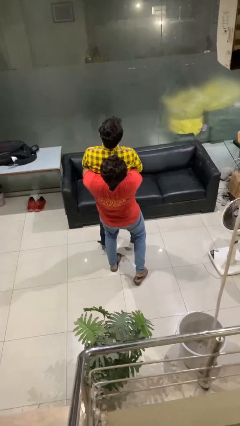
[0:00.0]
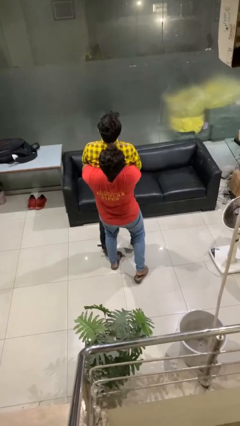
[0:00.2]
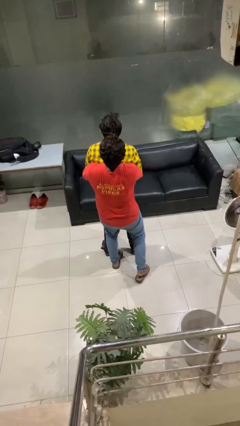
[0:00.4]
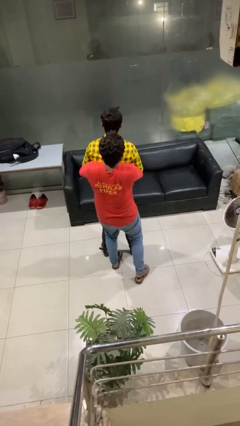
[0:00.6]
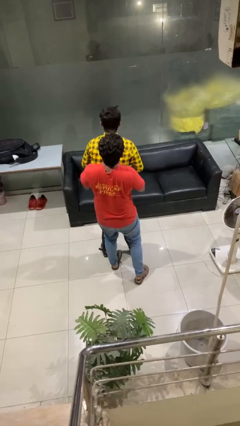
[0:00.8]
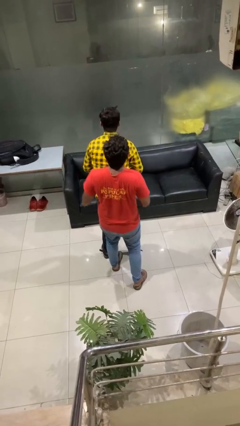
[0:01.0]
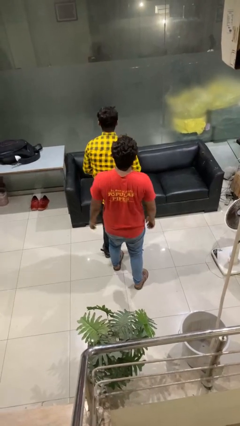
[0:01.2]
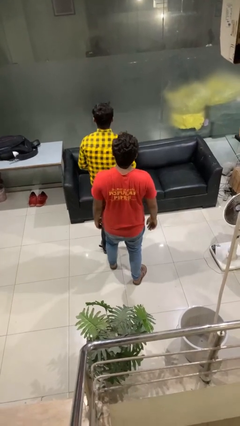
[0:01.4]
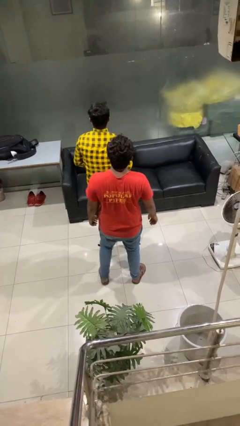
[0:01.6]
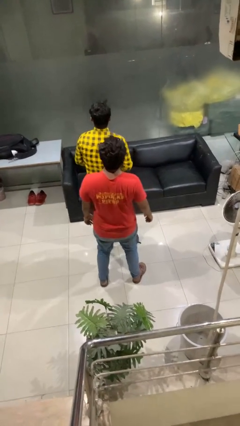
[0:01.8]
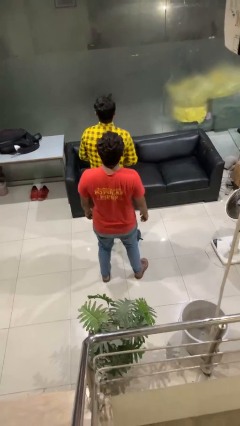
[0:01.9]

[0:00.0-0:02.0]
person puts down person

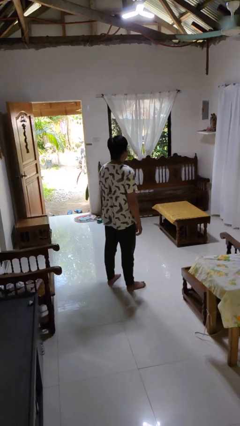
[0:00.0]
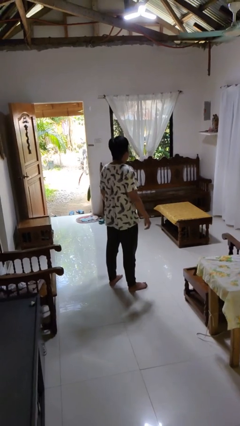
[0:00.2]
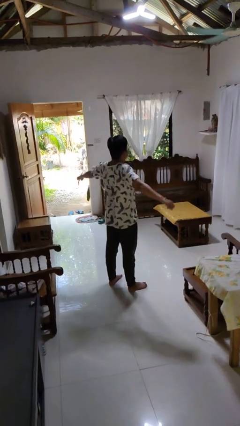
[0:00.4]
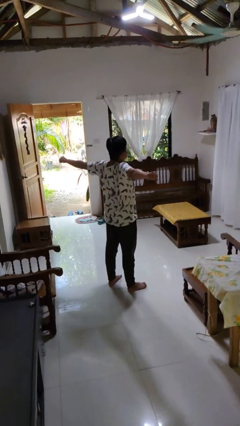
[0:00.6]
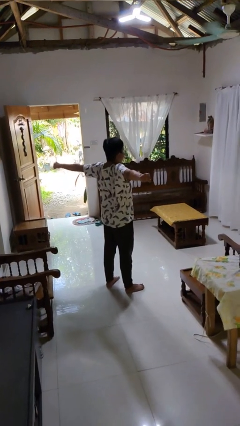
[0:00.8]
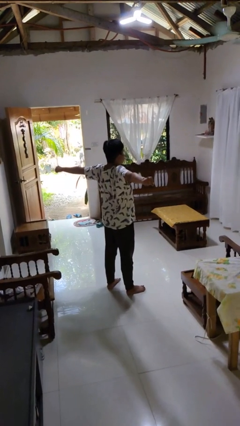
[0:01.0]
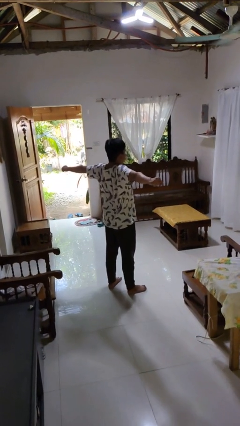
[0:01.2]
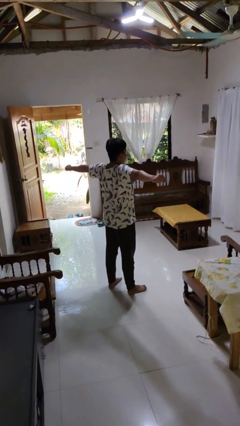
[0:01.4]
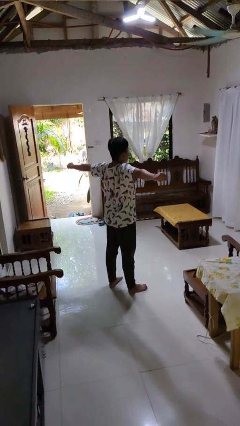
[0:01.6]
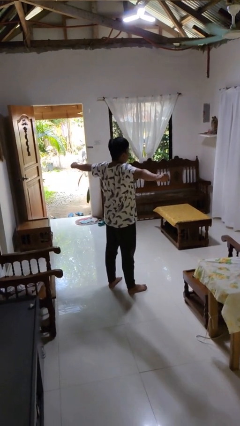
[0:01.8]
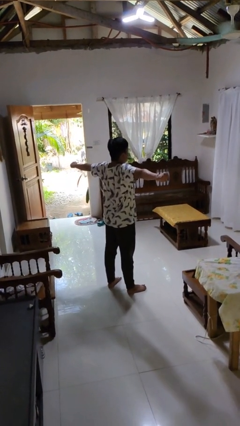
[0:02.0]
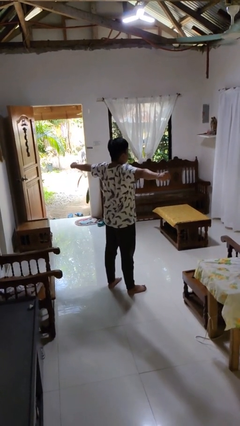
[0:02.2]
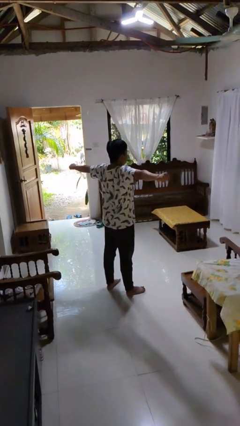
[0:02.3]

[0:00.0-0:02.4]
person stretches arms to side

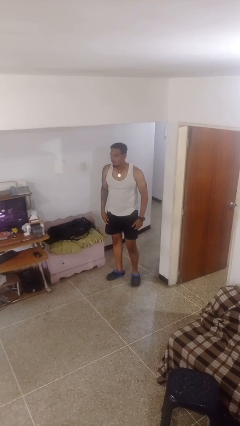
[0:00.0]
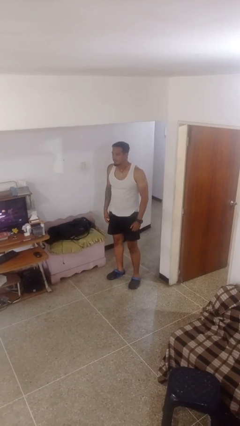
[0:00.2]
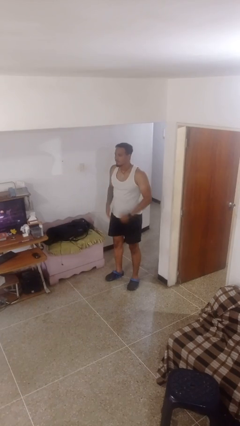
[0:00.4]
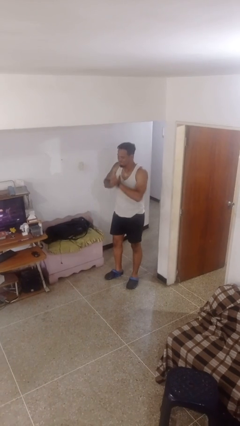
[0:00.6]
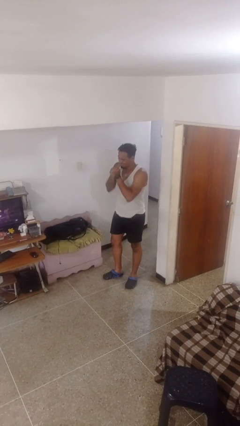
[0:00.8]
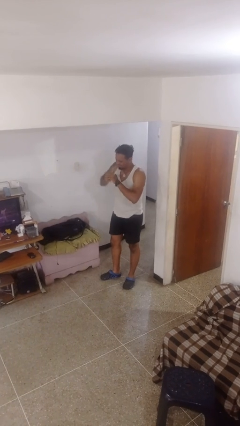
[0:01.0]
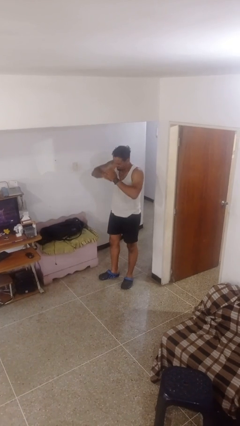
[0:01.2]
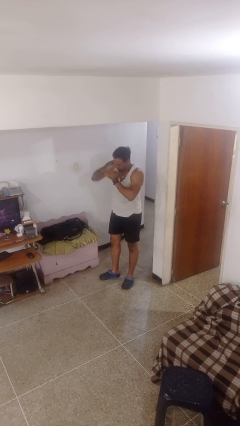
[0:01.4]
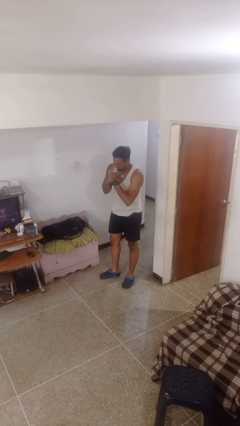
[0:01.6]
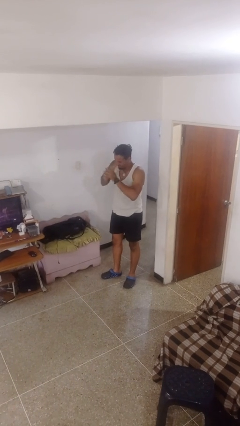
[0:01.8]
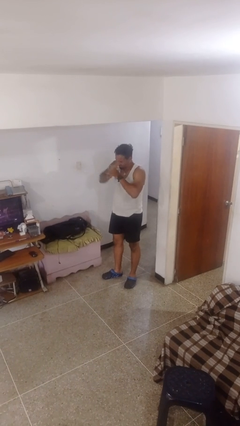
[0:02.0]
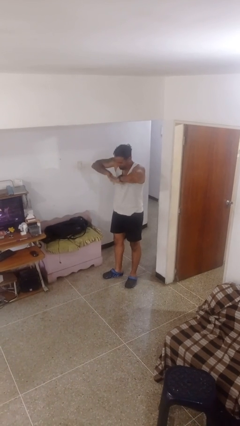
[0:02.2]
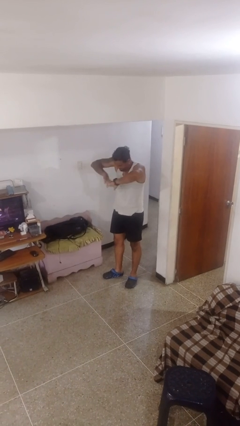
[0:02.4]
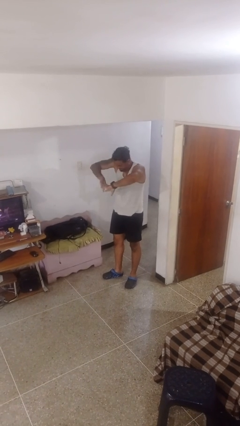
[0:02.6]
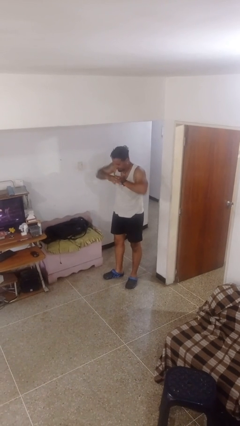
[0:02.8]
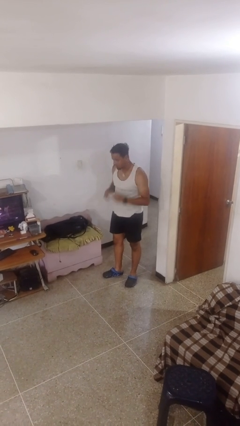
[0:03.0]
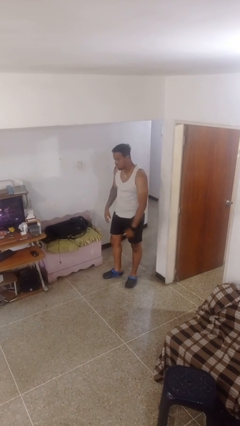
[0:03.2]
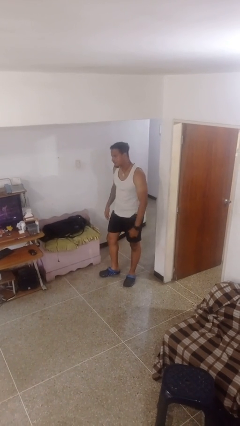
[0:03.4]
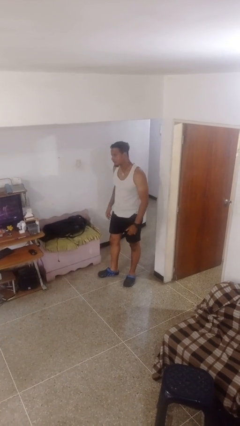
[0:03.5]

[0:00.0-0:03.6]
person cracks knuckles

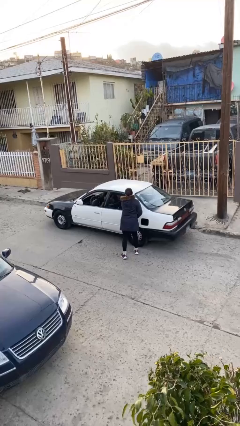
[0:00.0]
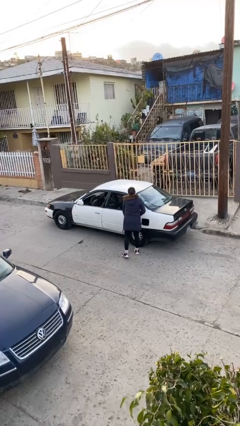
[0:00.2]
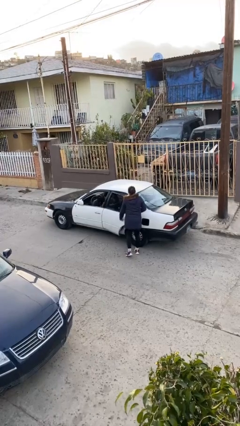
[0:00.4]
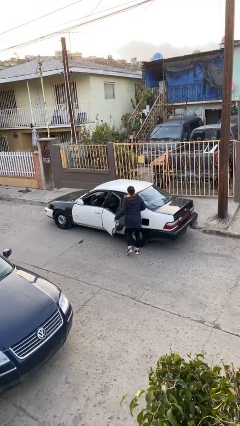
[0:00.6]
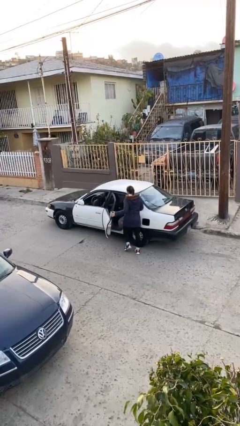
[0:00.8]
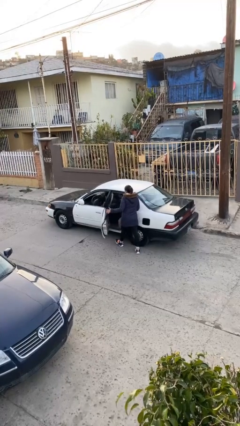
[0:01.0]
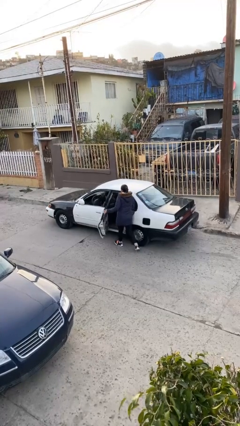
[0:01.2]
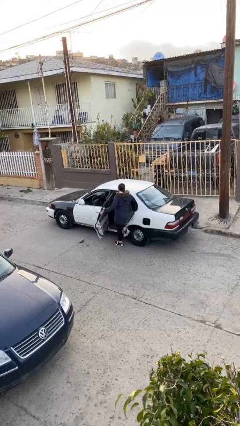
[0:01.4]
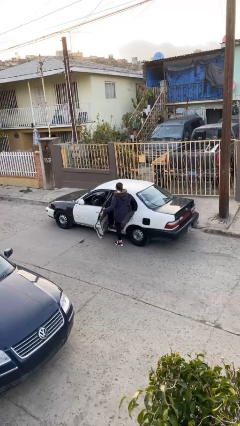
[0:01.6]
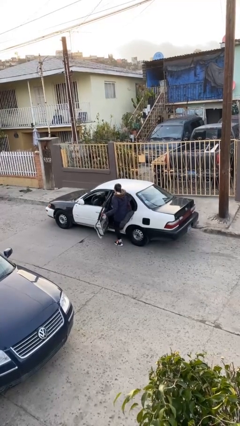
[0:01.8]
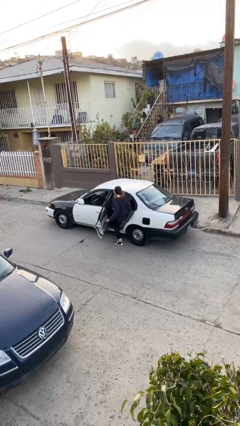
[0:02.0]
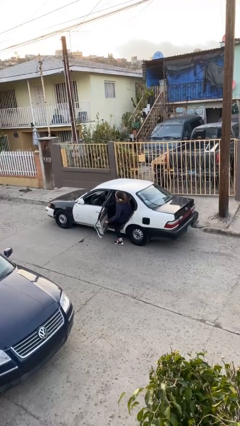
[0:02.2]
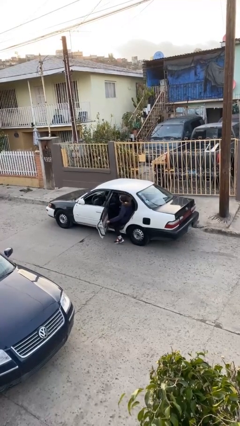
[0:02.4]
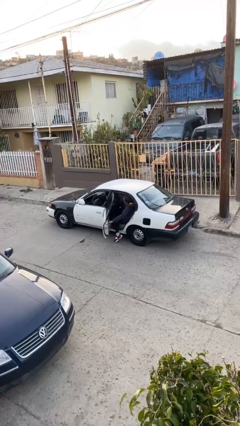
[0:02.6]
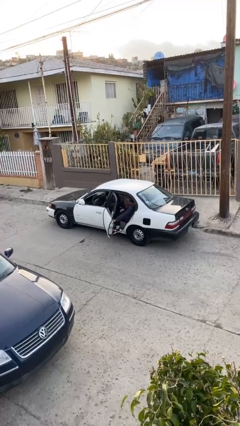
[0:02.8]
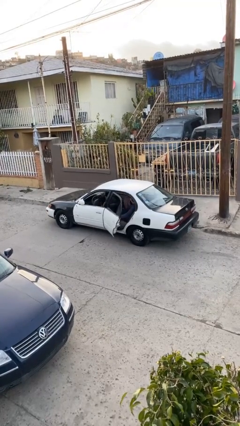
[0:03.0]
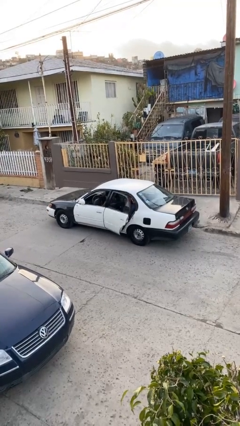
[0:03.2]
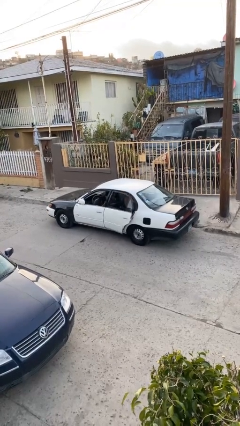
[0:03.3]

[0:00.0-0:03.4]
car picks up person

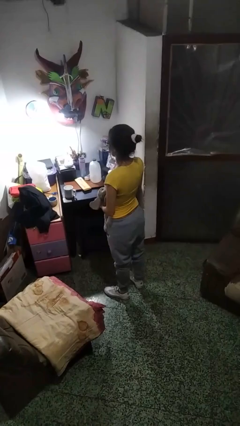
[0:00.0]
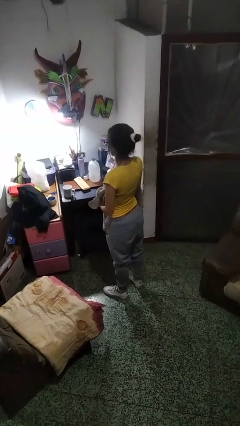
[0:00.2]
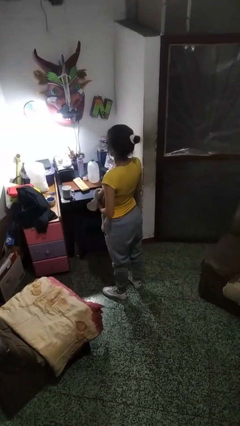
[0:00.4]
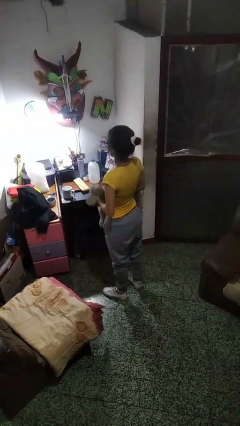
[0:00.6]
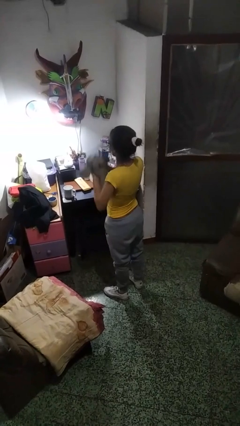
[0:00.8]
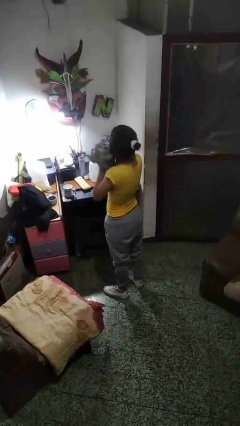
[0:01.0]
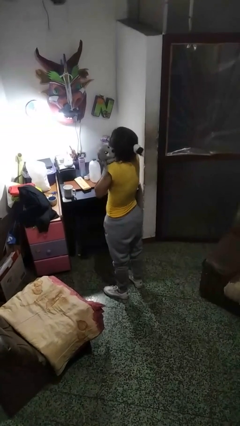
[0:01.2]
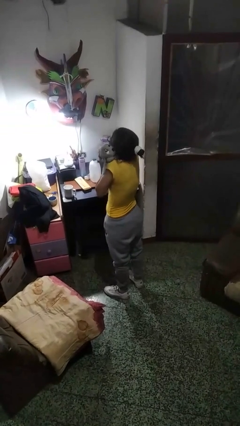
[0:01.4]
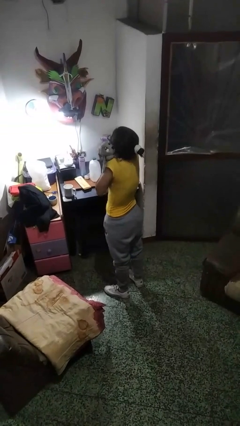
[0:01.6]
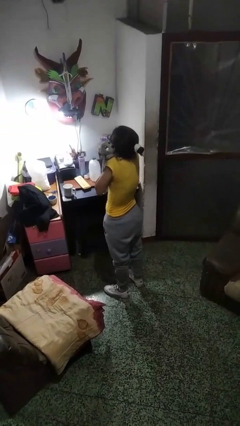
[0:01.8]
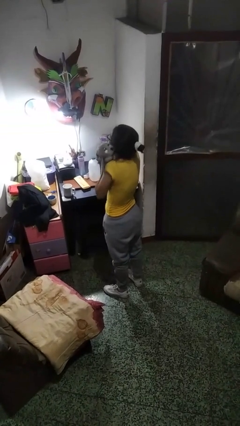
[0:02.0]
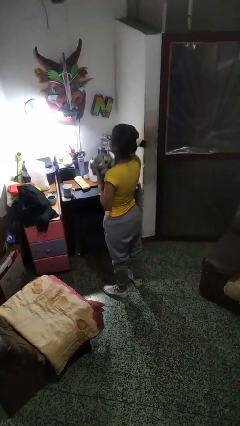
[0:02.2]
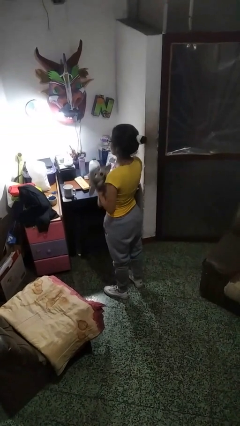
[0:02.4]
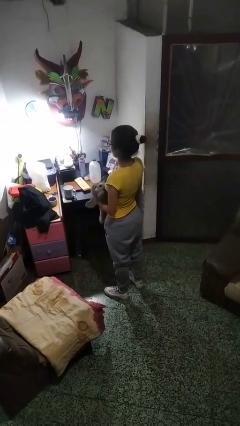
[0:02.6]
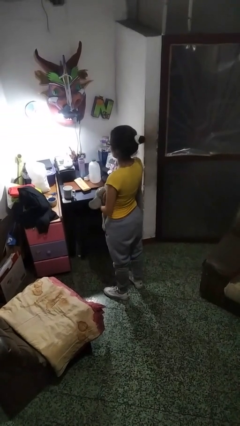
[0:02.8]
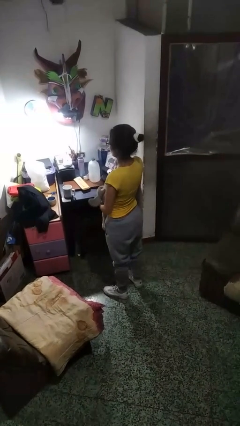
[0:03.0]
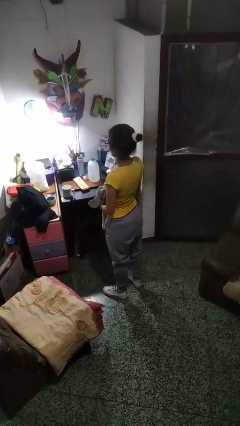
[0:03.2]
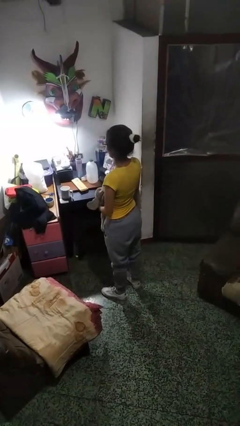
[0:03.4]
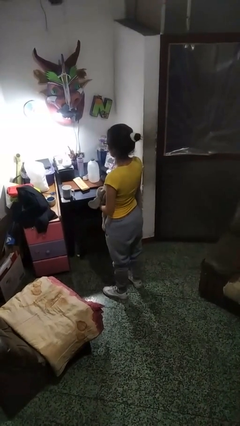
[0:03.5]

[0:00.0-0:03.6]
person hugs stuffed animal

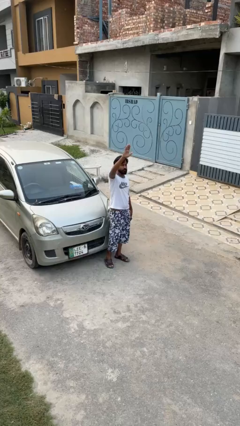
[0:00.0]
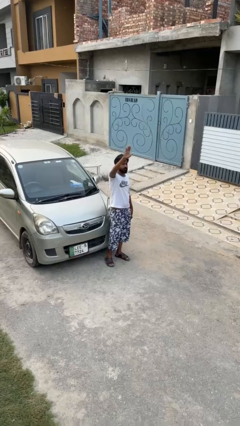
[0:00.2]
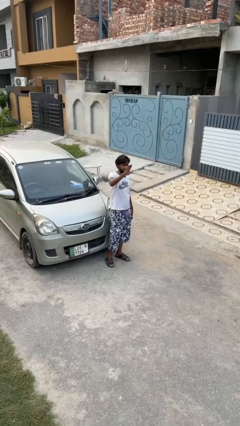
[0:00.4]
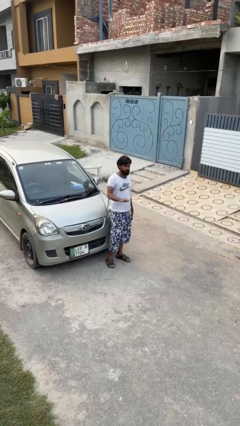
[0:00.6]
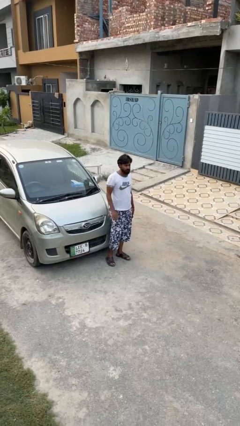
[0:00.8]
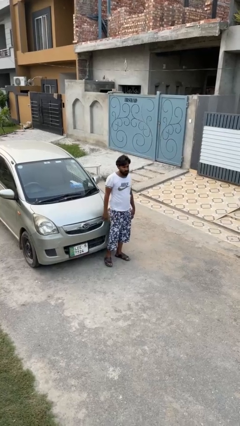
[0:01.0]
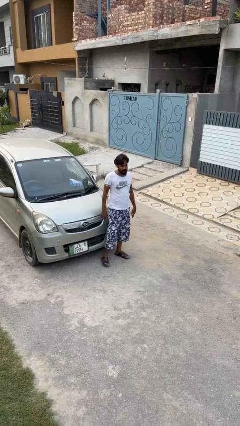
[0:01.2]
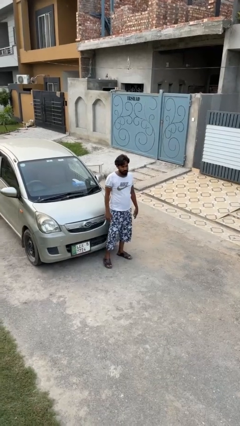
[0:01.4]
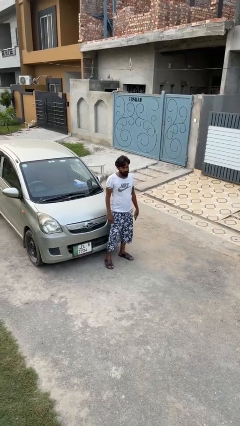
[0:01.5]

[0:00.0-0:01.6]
person gestures lower hand

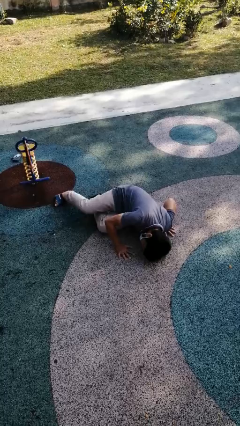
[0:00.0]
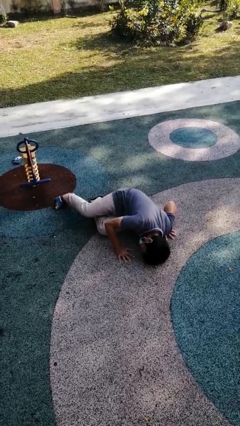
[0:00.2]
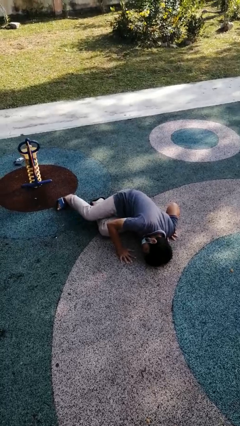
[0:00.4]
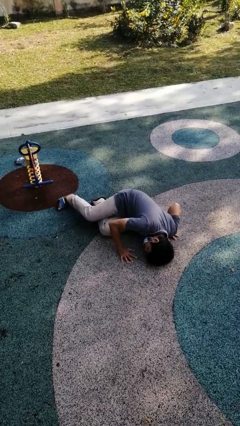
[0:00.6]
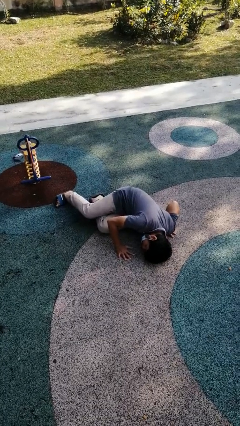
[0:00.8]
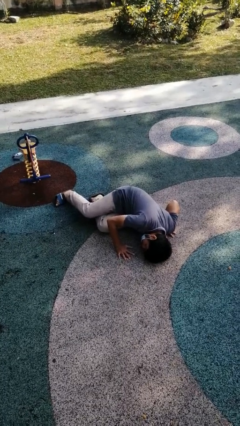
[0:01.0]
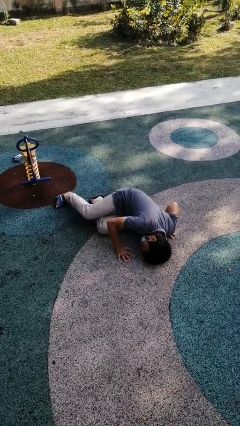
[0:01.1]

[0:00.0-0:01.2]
person lies down on floor
